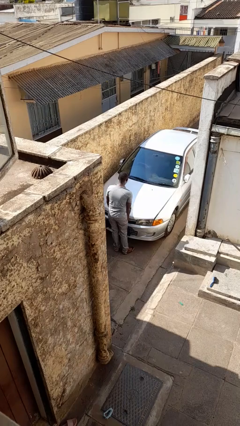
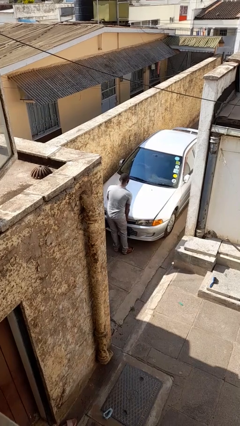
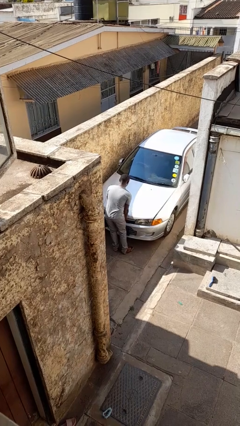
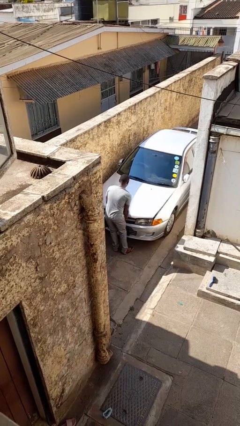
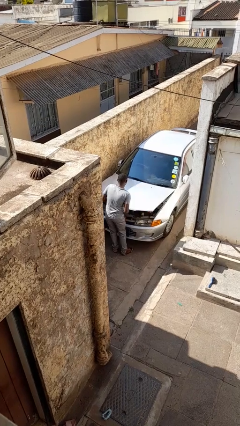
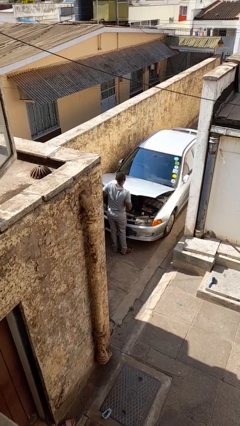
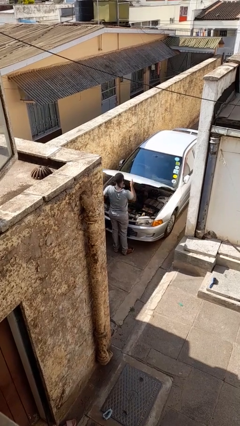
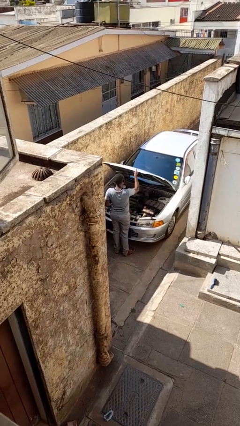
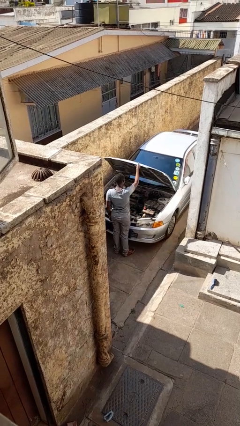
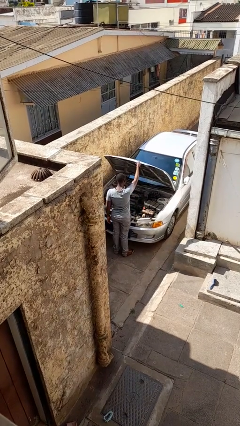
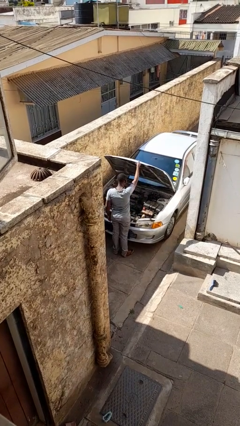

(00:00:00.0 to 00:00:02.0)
person opens car hood

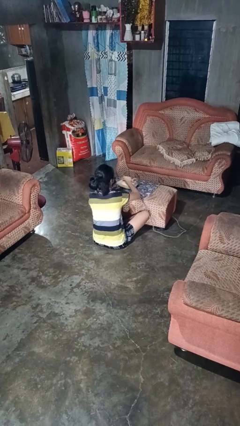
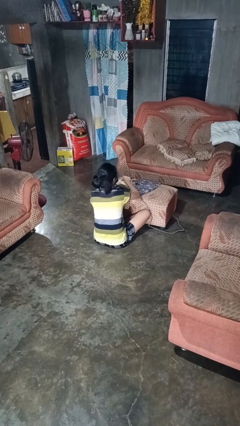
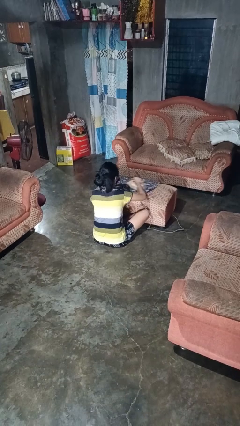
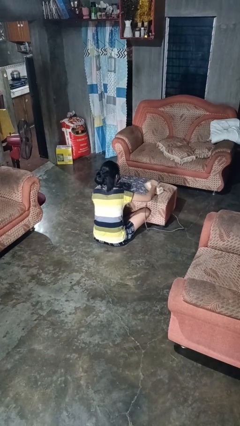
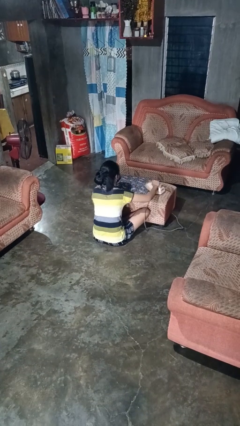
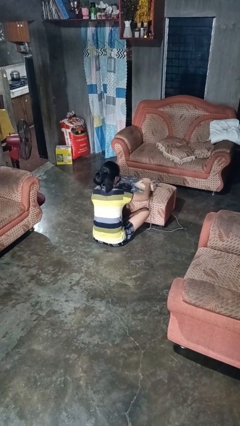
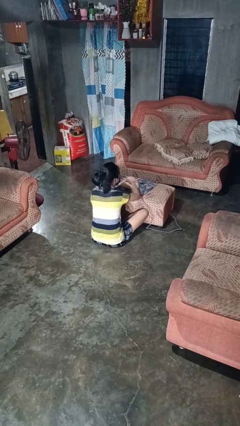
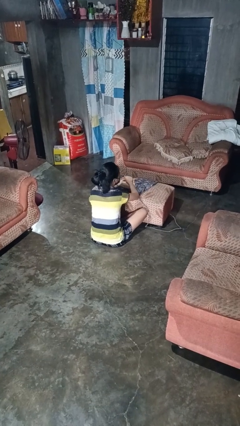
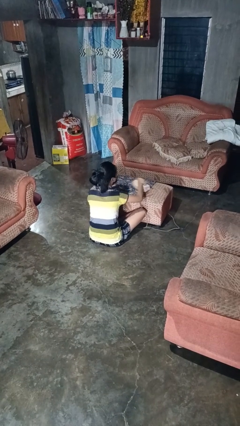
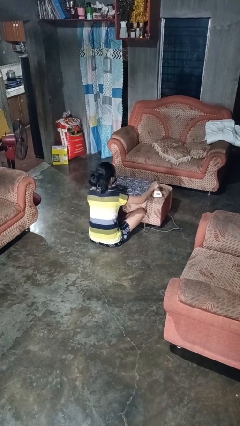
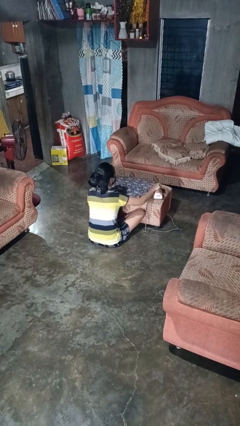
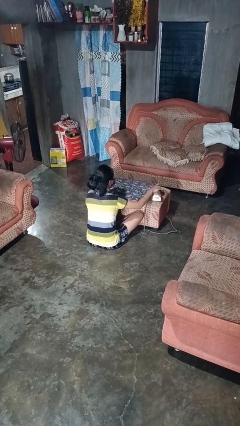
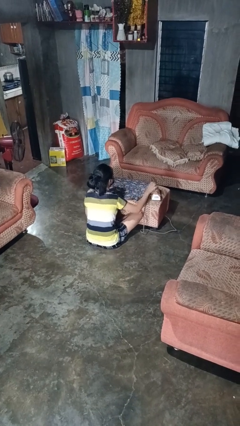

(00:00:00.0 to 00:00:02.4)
person irons clothes

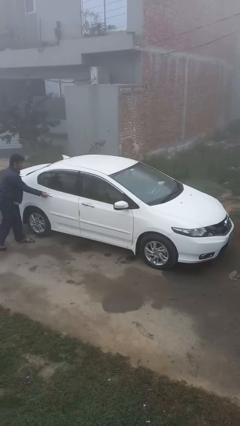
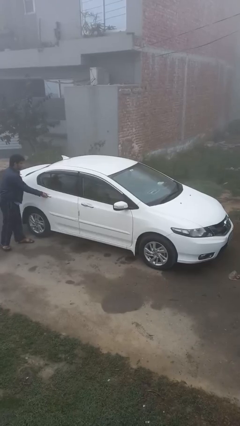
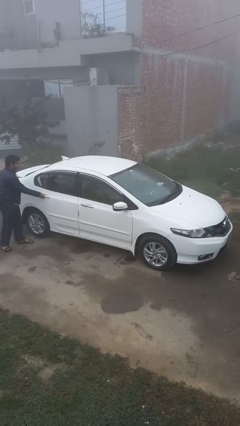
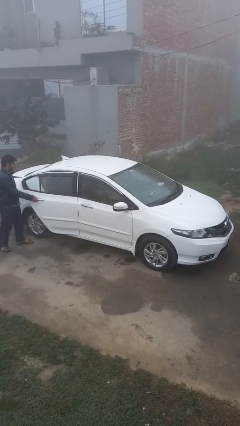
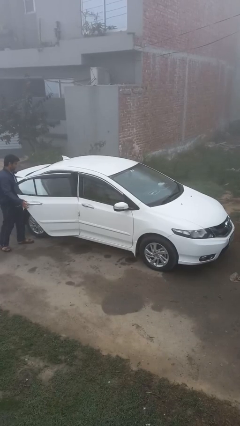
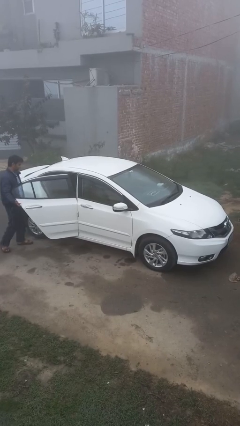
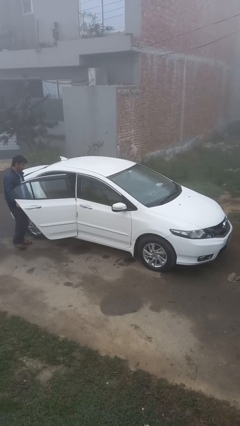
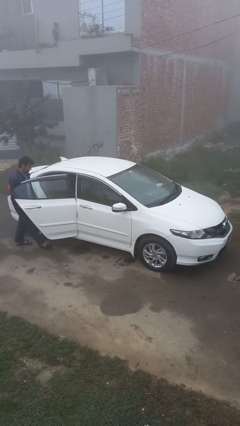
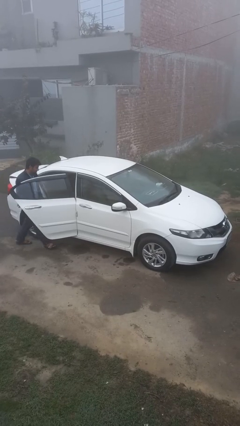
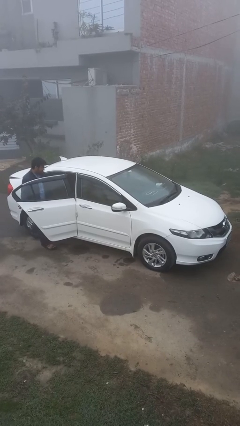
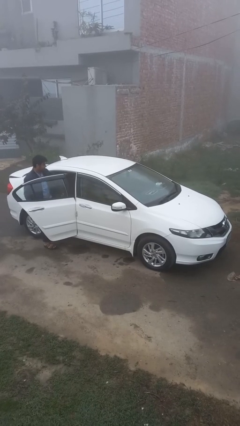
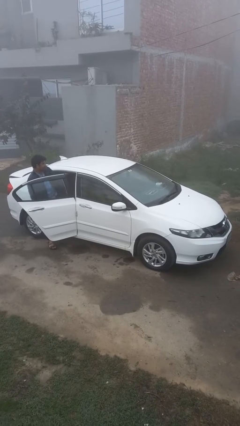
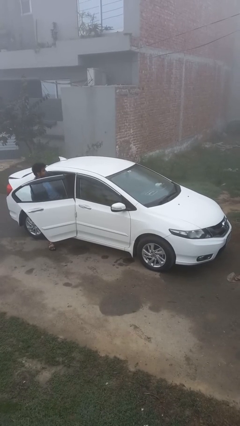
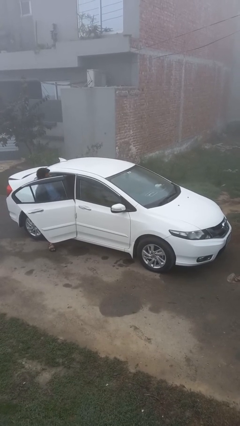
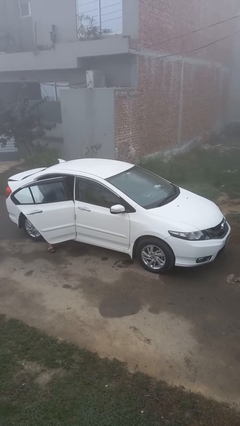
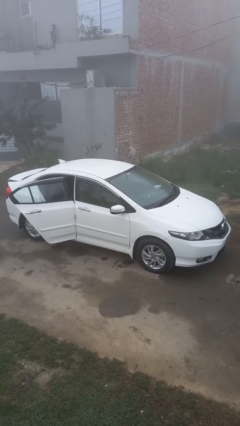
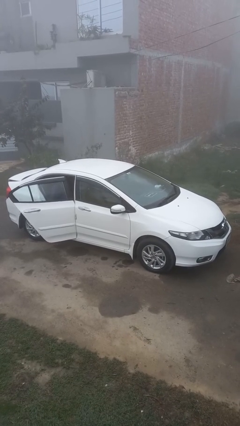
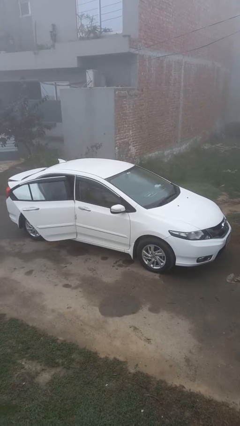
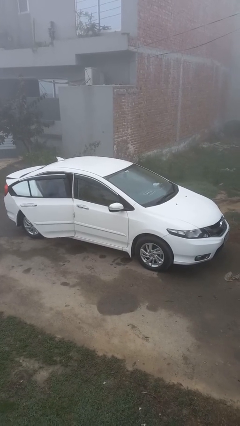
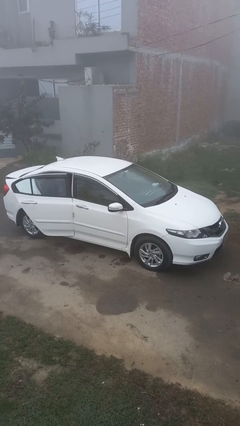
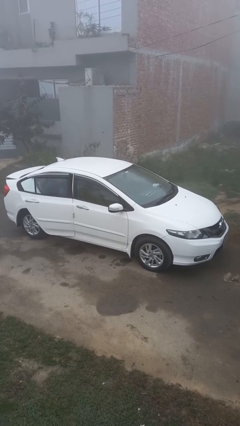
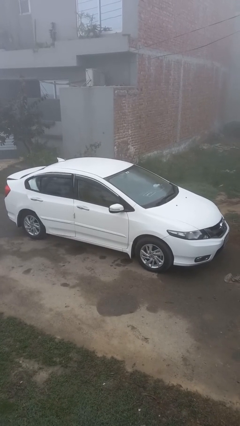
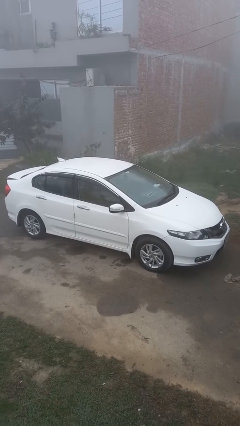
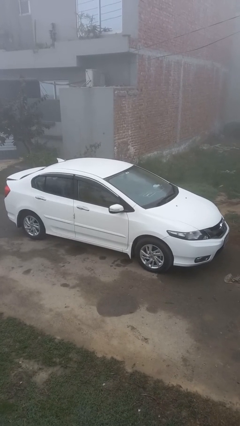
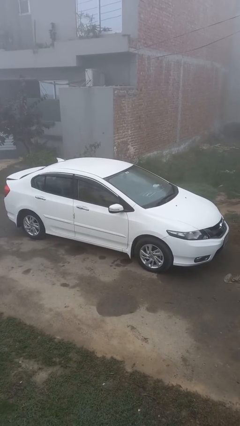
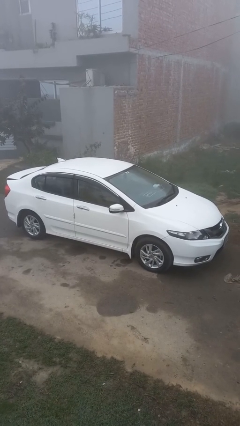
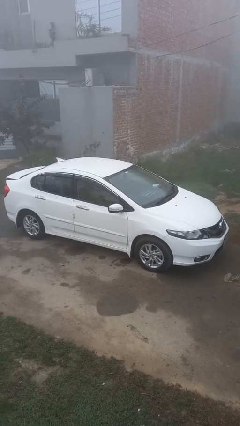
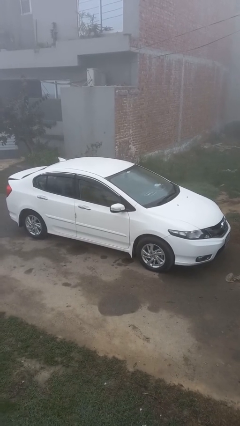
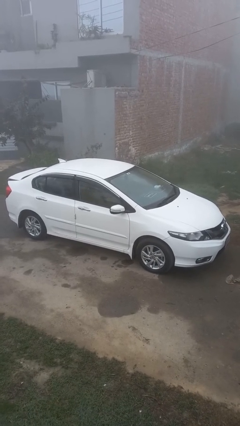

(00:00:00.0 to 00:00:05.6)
car picks up person

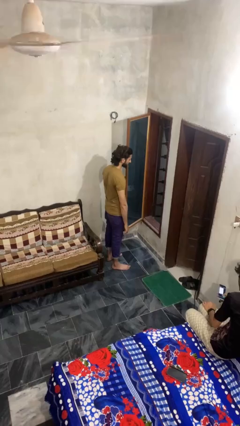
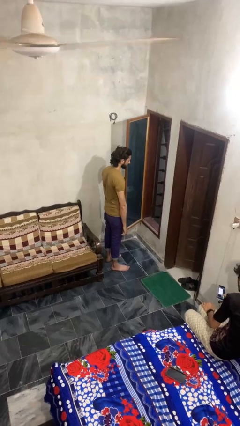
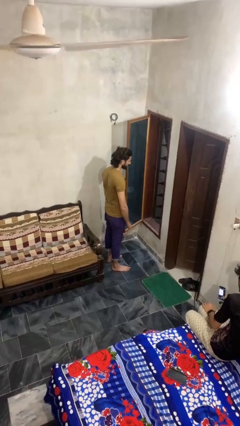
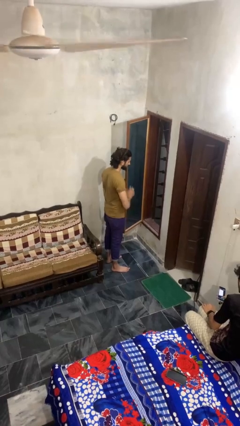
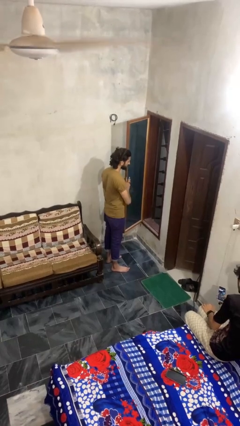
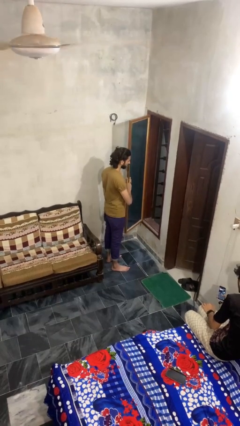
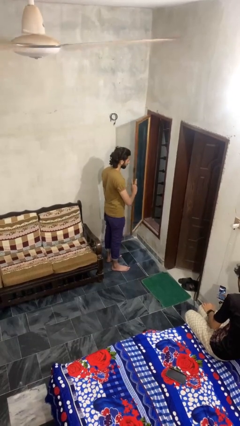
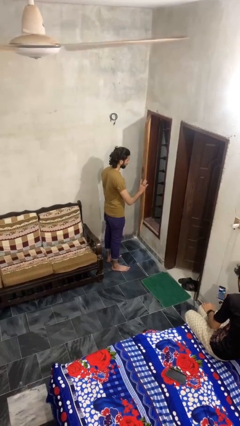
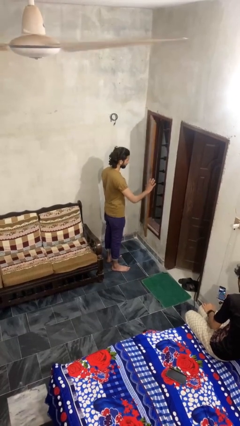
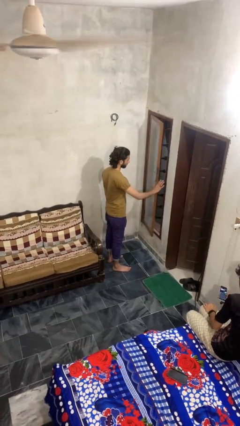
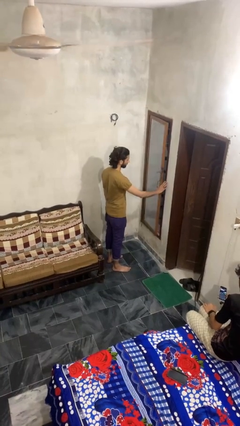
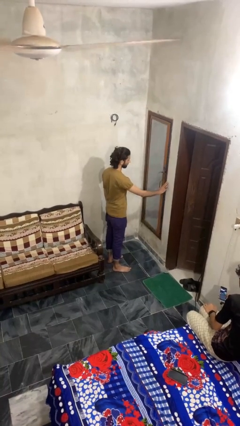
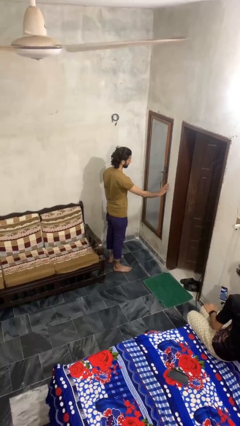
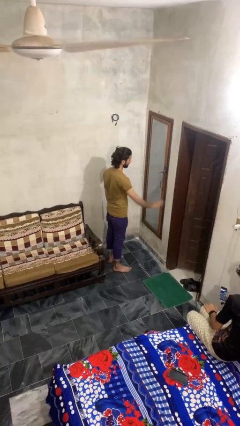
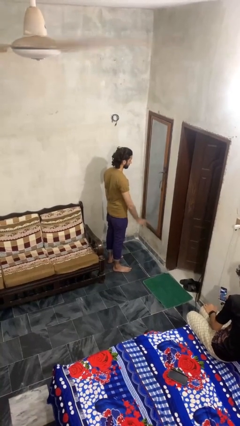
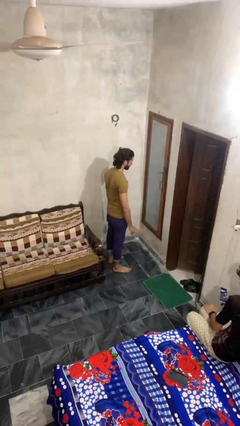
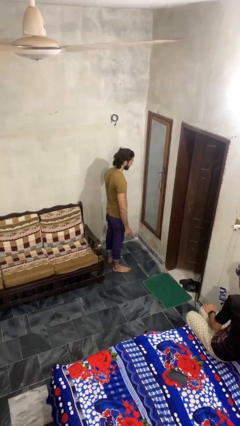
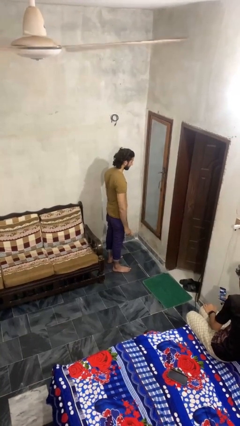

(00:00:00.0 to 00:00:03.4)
person closes home window

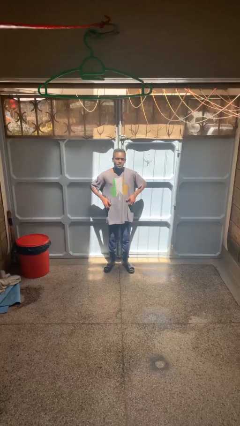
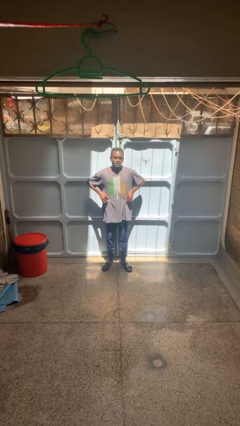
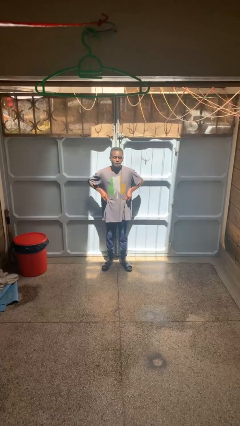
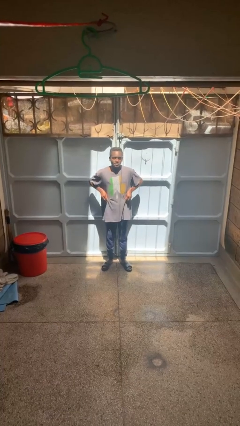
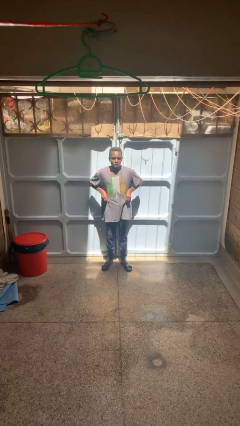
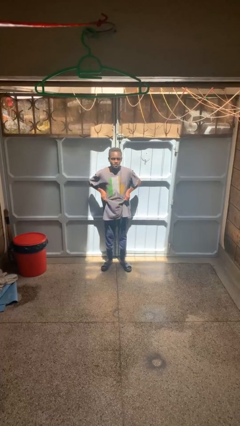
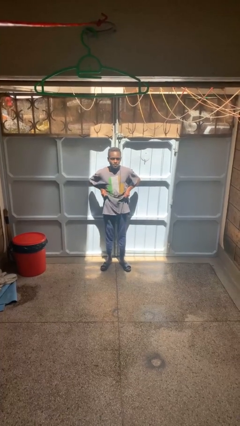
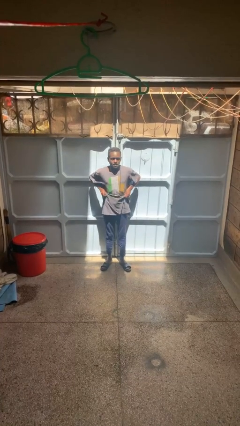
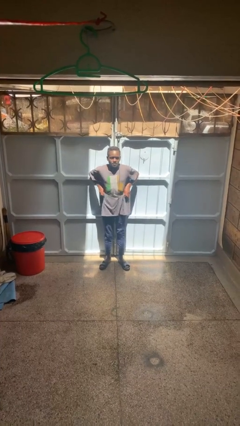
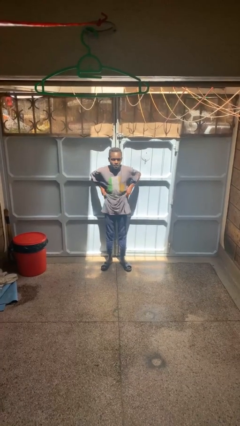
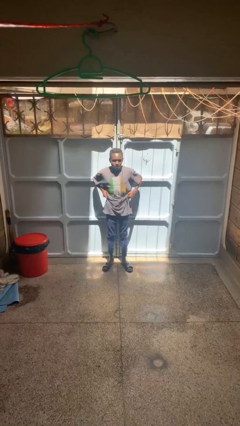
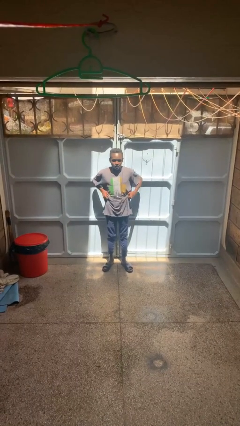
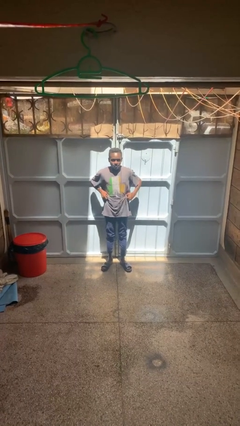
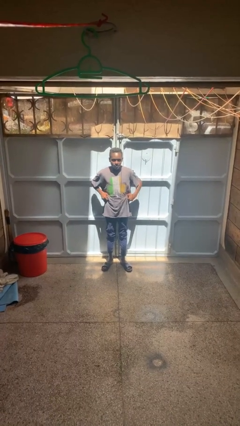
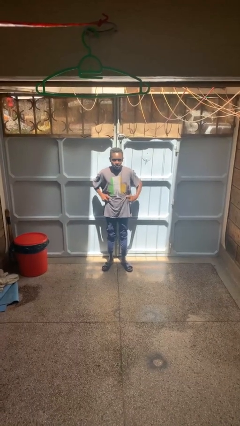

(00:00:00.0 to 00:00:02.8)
person hikes up pants

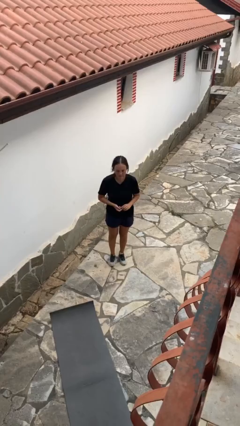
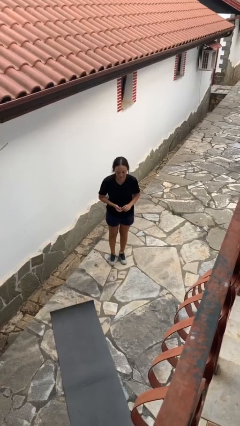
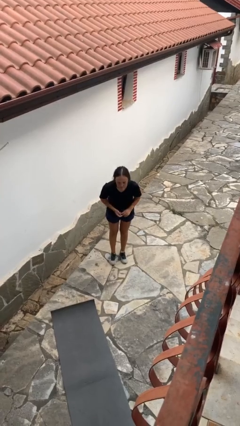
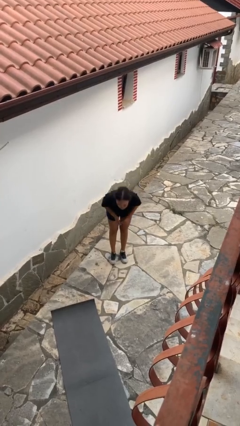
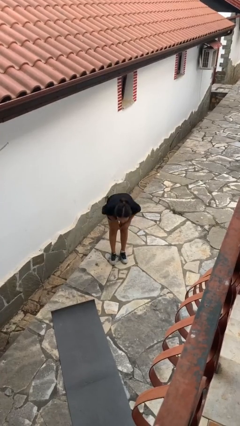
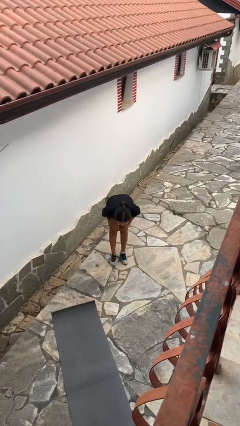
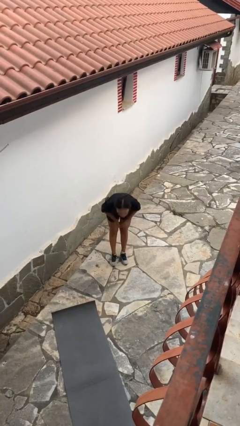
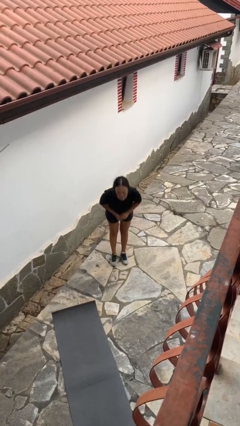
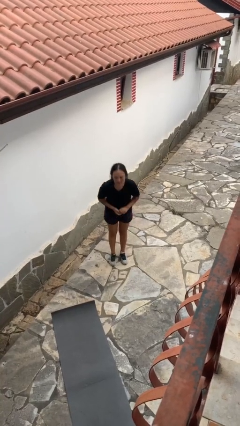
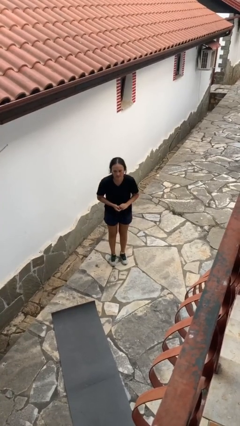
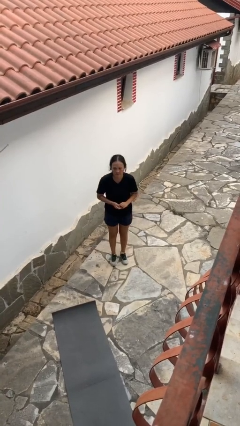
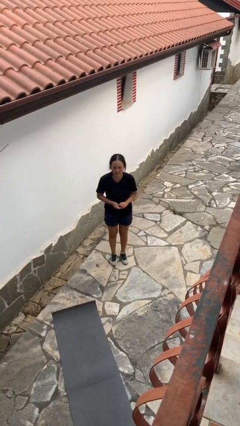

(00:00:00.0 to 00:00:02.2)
person bows
